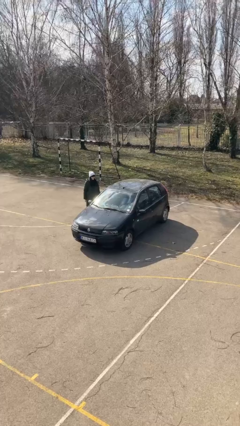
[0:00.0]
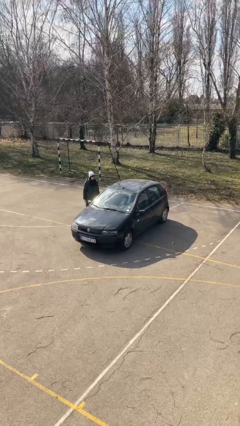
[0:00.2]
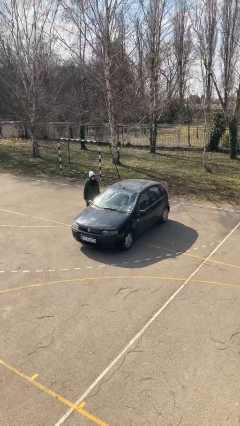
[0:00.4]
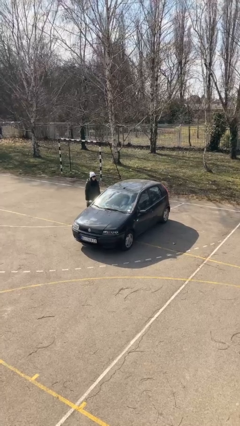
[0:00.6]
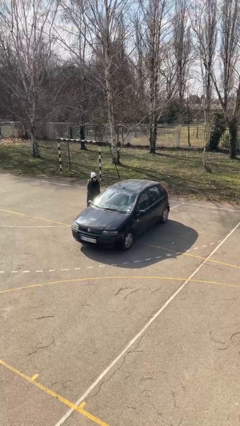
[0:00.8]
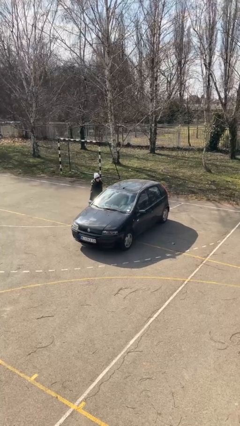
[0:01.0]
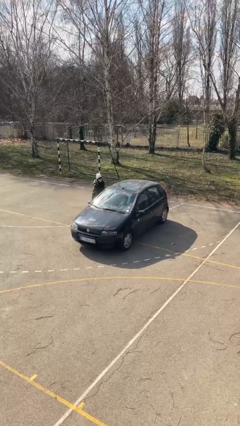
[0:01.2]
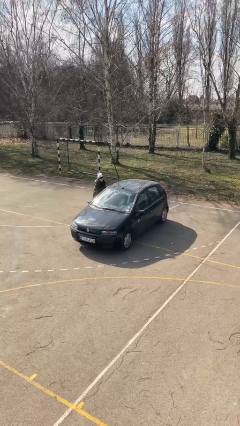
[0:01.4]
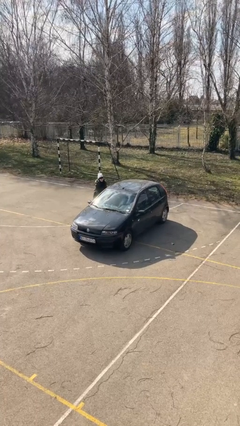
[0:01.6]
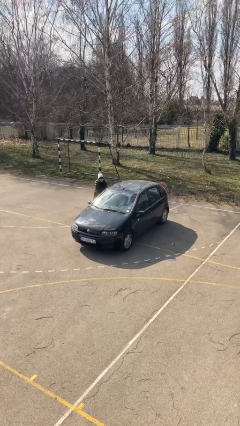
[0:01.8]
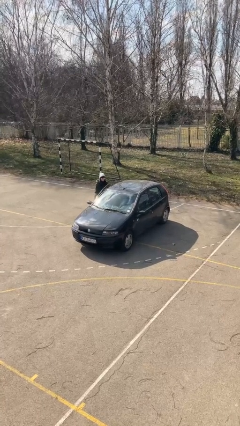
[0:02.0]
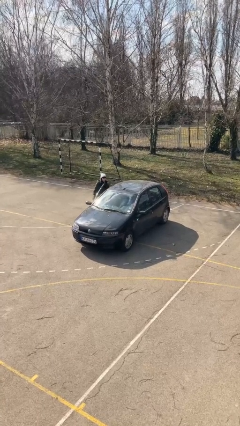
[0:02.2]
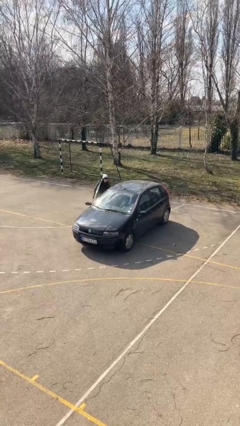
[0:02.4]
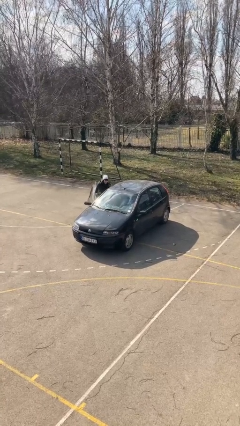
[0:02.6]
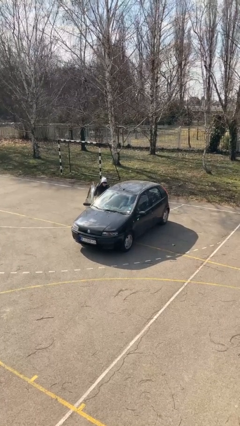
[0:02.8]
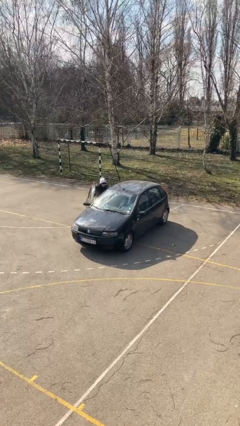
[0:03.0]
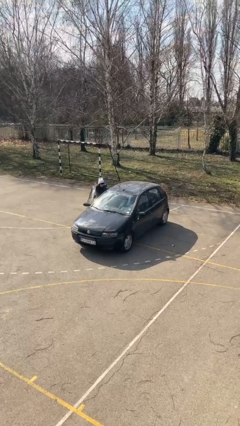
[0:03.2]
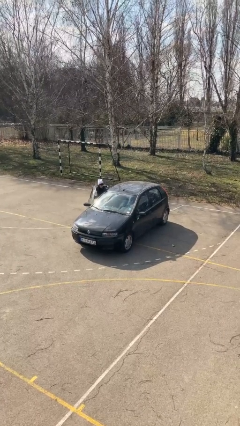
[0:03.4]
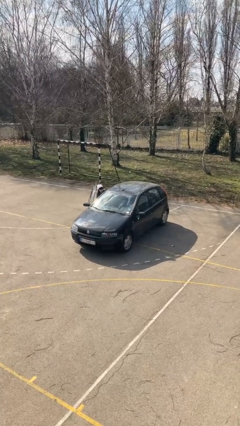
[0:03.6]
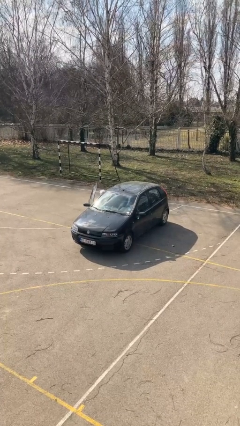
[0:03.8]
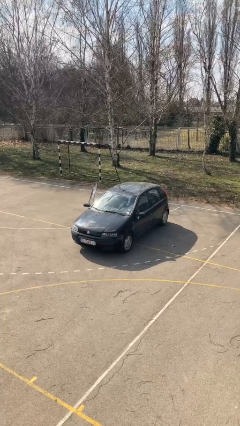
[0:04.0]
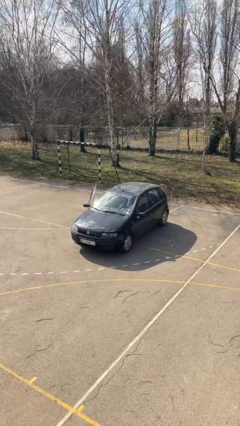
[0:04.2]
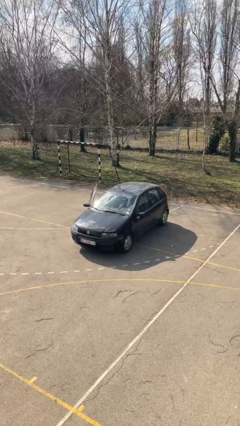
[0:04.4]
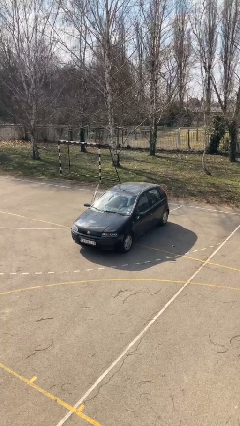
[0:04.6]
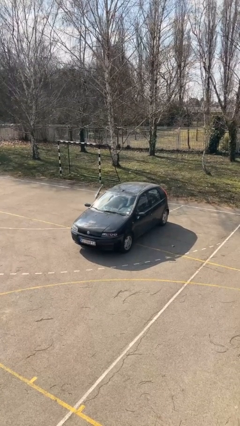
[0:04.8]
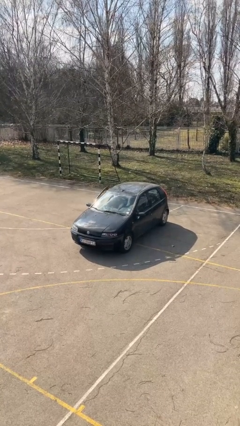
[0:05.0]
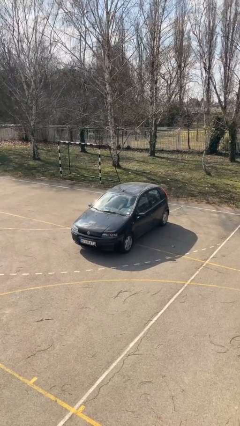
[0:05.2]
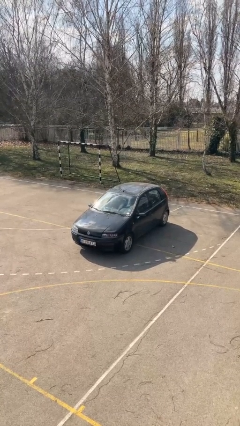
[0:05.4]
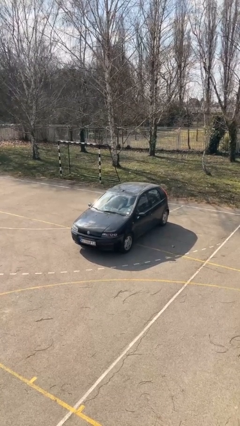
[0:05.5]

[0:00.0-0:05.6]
car picks up person

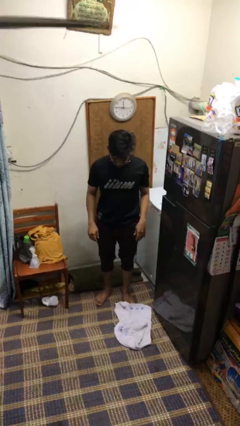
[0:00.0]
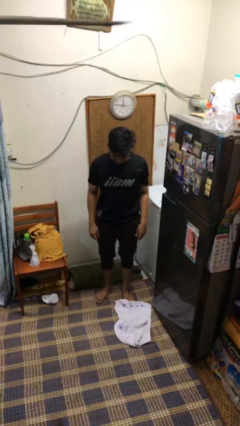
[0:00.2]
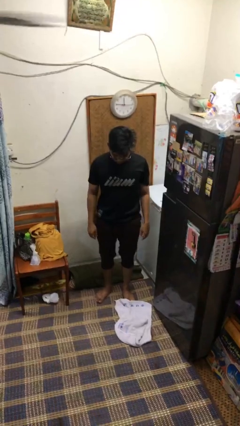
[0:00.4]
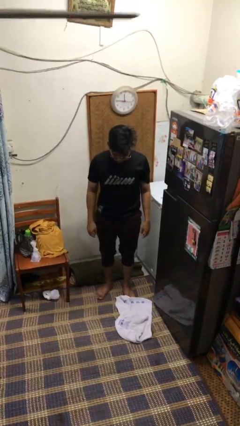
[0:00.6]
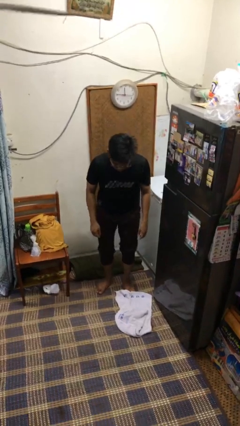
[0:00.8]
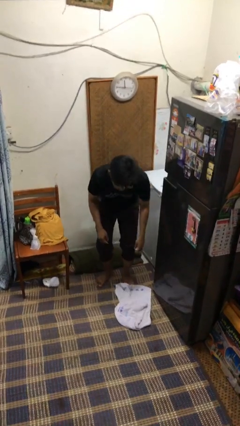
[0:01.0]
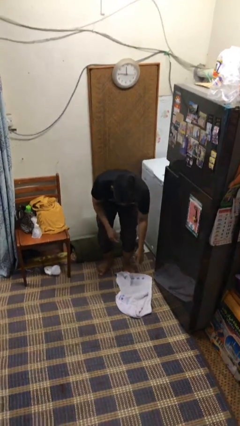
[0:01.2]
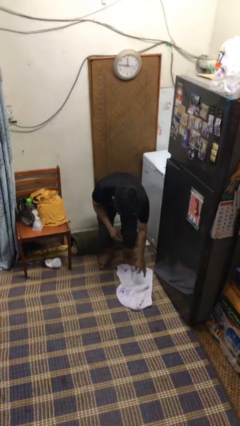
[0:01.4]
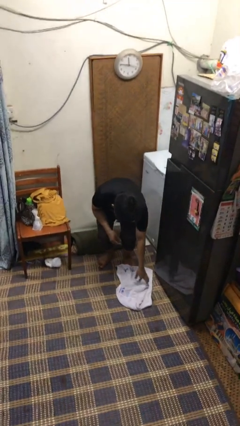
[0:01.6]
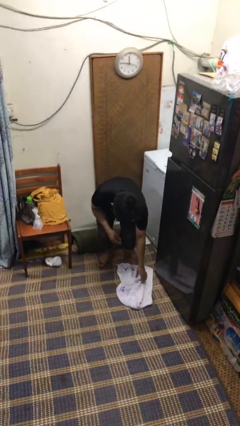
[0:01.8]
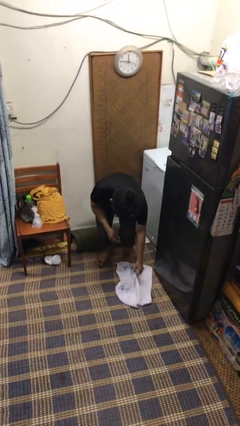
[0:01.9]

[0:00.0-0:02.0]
person picks up object from floor

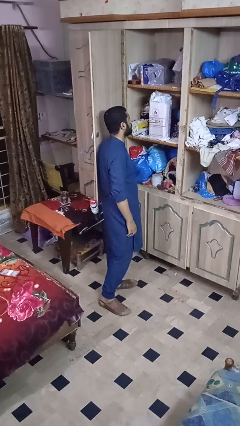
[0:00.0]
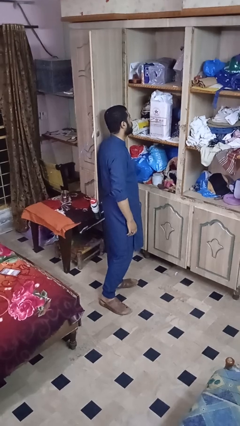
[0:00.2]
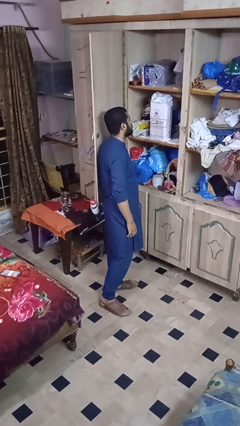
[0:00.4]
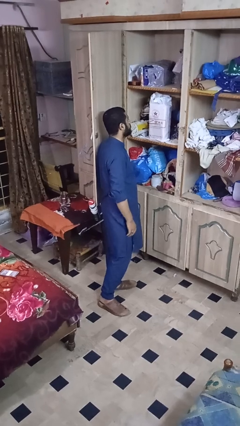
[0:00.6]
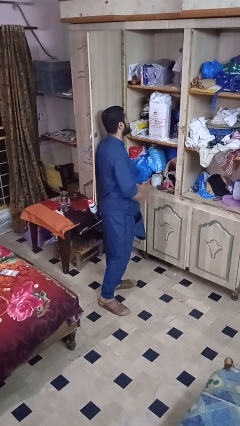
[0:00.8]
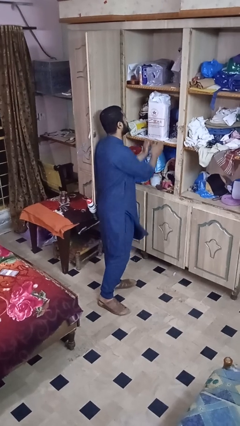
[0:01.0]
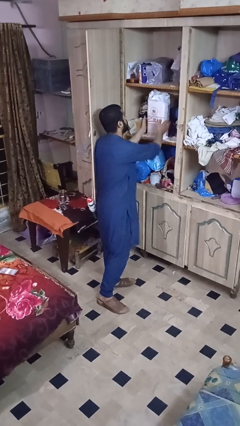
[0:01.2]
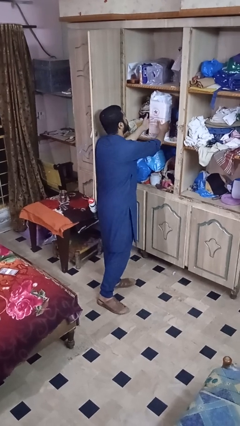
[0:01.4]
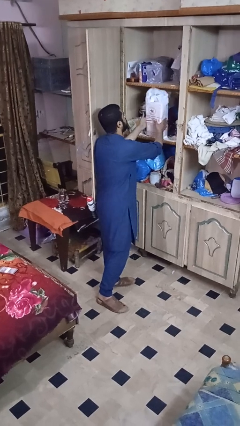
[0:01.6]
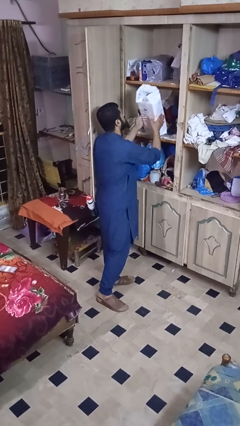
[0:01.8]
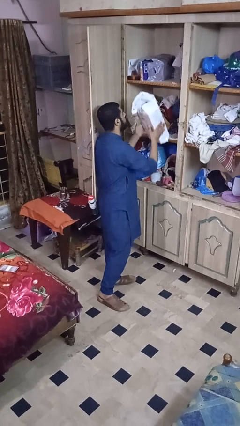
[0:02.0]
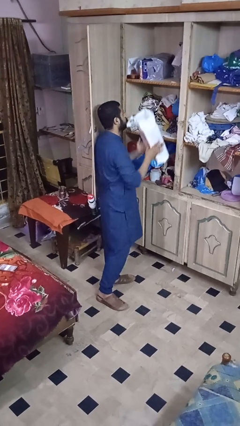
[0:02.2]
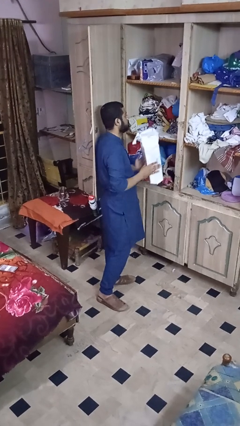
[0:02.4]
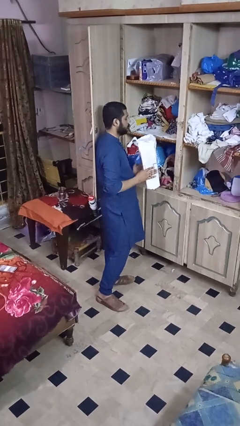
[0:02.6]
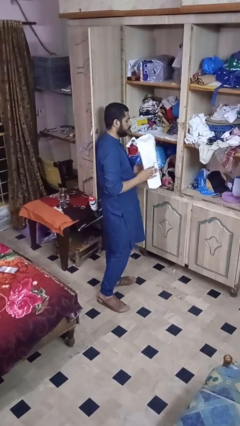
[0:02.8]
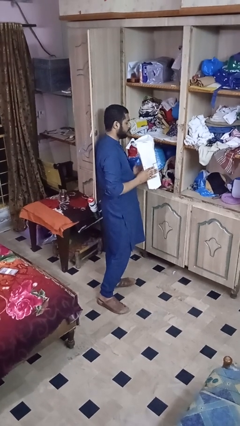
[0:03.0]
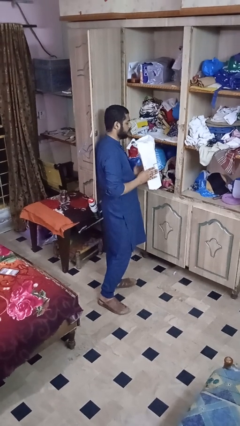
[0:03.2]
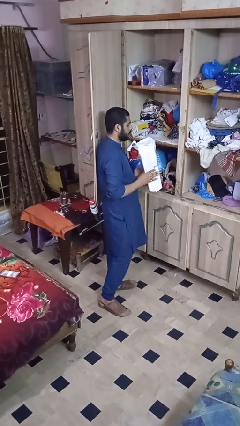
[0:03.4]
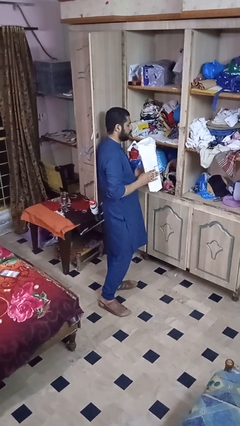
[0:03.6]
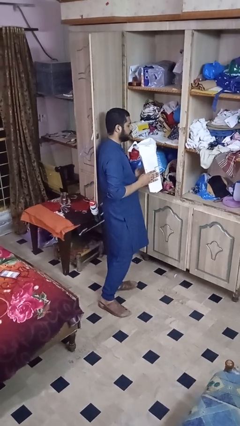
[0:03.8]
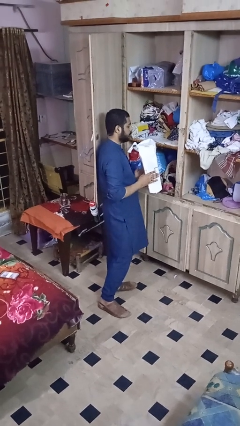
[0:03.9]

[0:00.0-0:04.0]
person picks up object from cabinet

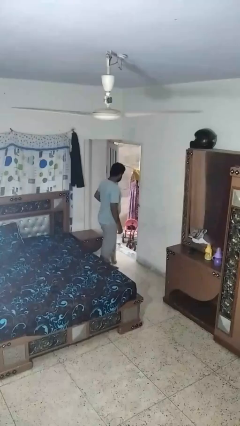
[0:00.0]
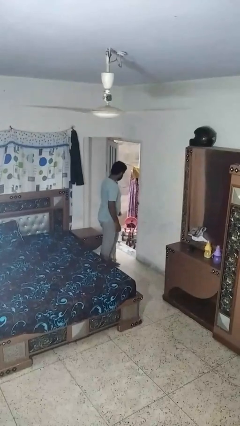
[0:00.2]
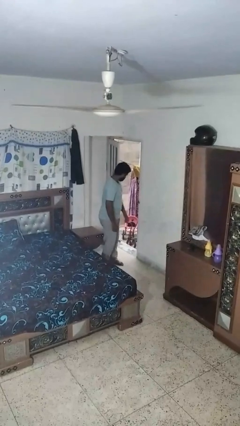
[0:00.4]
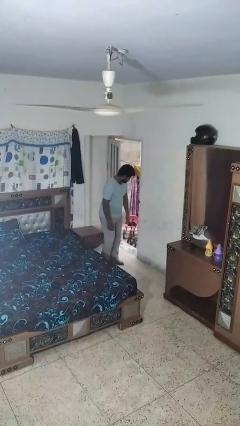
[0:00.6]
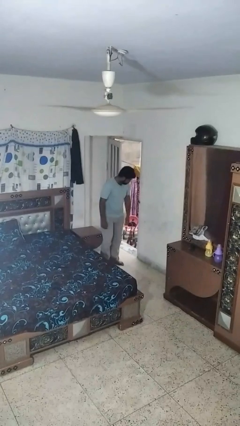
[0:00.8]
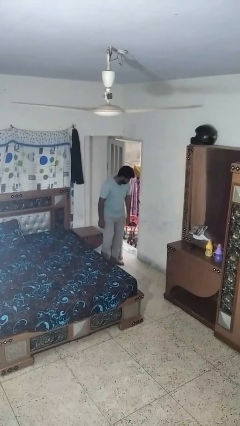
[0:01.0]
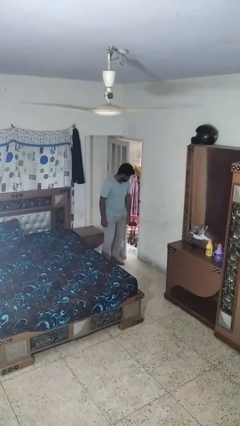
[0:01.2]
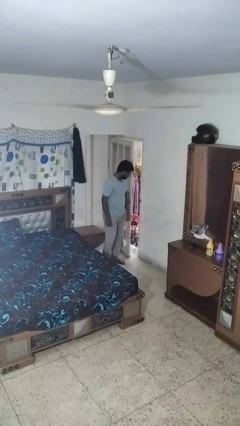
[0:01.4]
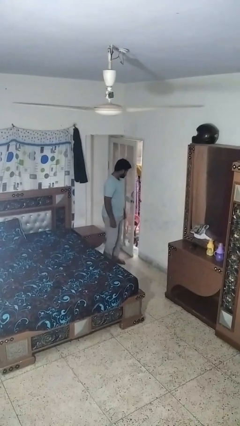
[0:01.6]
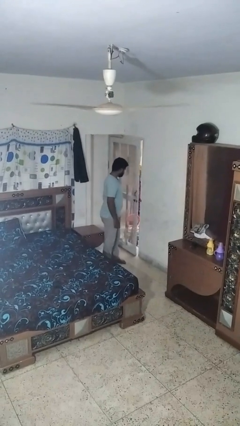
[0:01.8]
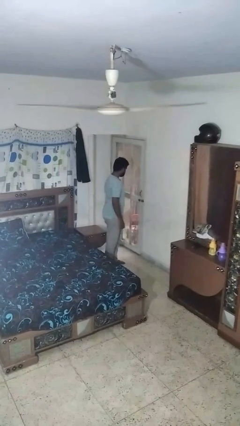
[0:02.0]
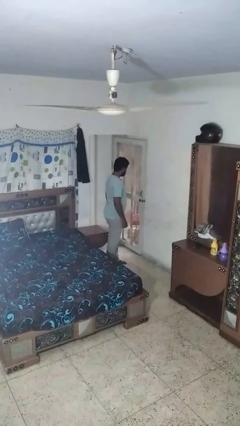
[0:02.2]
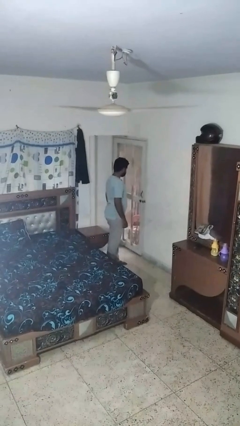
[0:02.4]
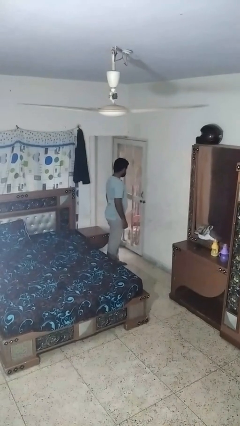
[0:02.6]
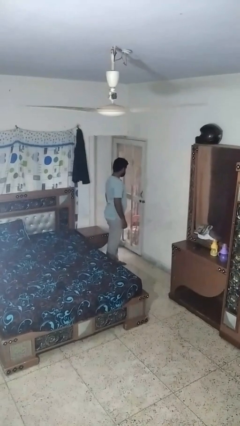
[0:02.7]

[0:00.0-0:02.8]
person closes door with hip

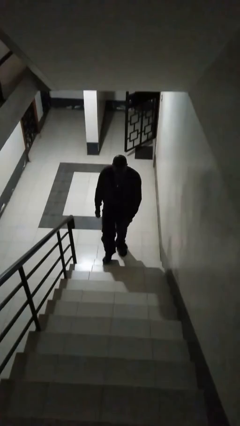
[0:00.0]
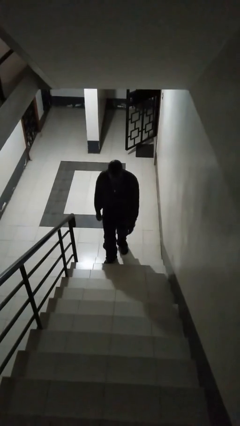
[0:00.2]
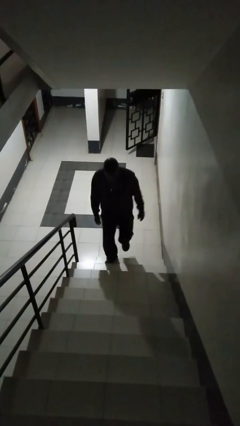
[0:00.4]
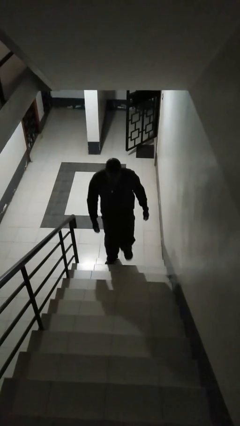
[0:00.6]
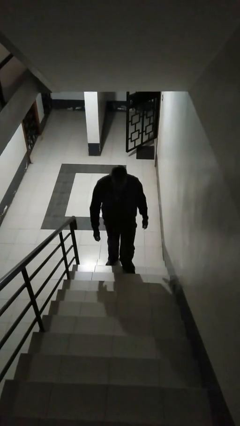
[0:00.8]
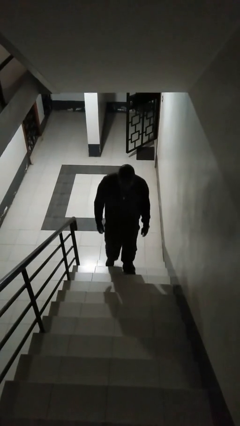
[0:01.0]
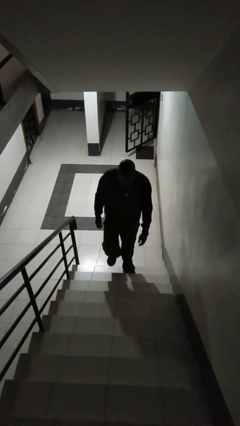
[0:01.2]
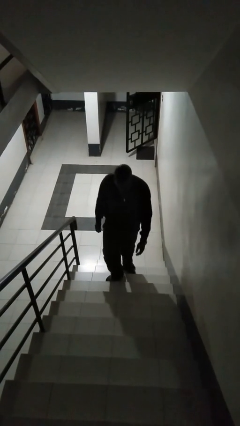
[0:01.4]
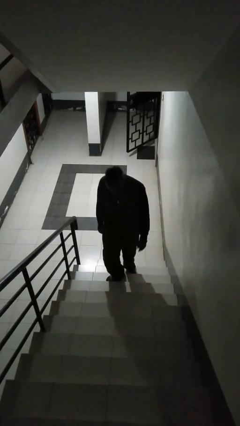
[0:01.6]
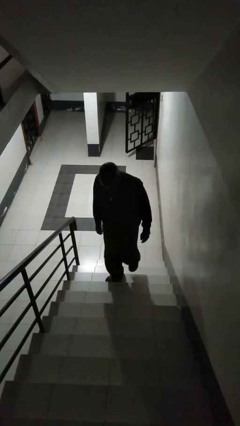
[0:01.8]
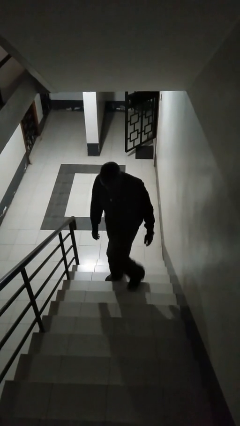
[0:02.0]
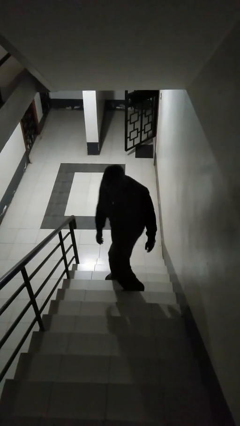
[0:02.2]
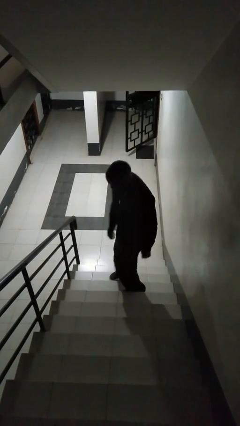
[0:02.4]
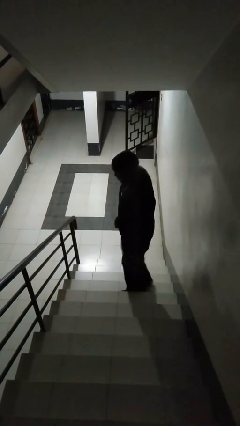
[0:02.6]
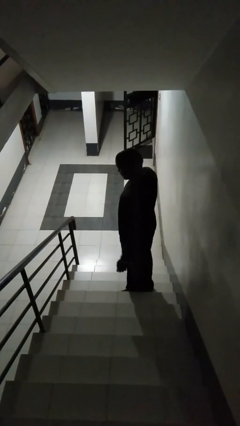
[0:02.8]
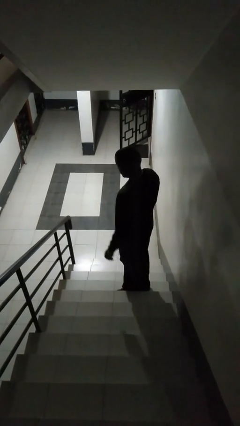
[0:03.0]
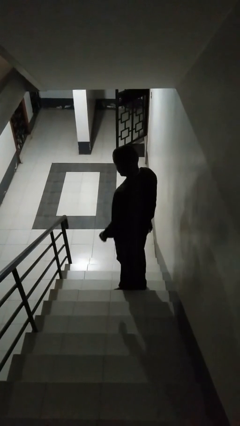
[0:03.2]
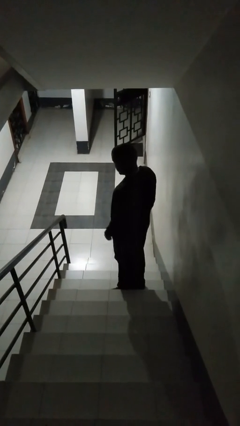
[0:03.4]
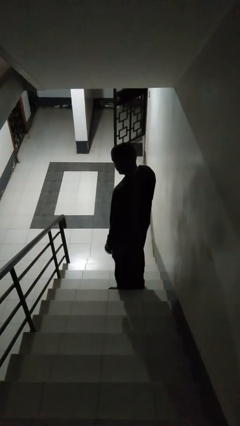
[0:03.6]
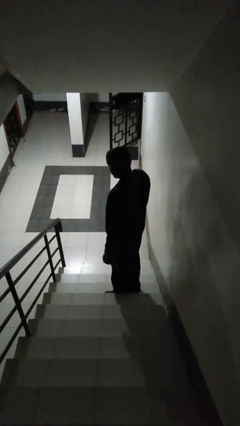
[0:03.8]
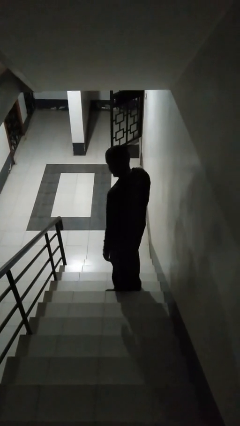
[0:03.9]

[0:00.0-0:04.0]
person climbs up stairs
